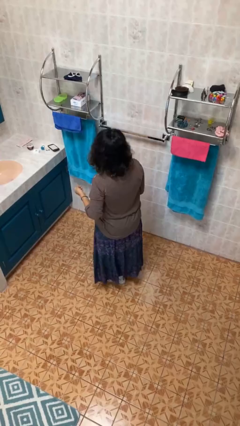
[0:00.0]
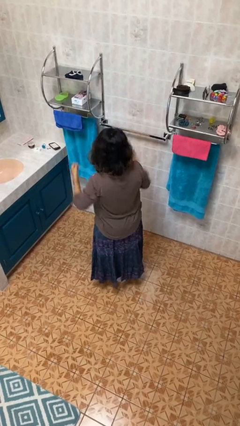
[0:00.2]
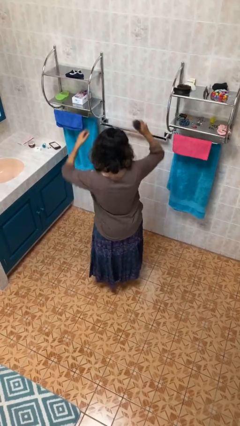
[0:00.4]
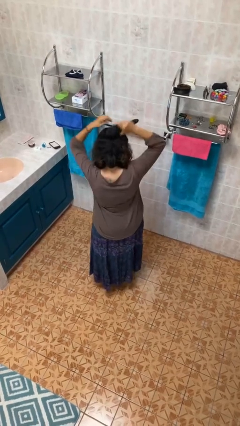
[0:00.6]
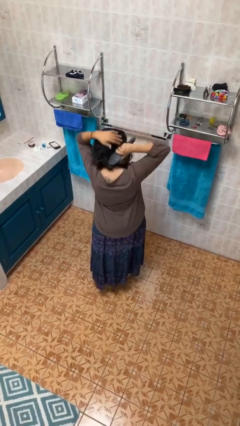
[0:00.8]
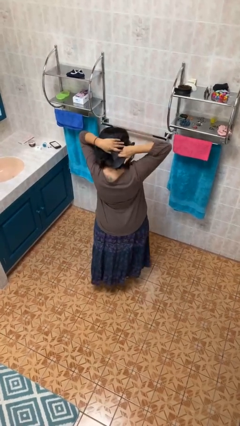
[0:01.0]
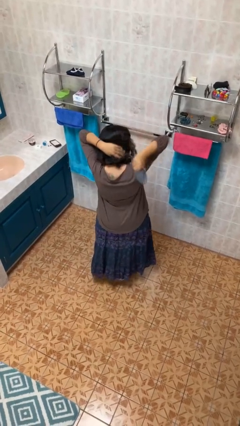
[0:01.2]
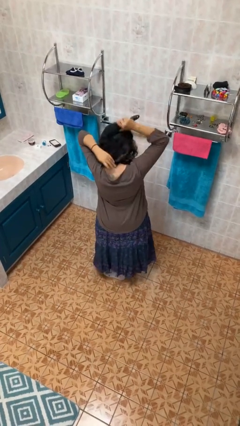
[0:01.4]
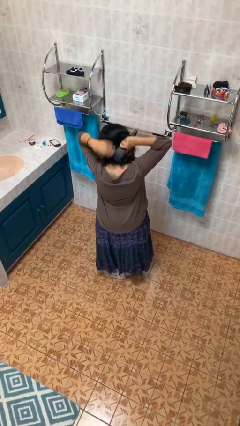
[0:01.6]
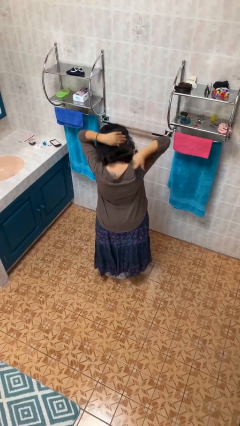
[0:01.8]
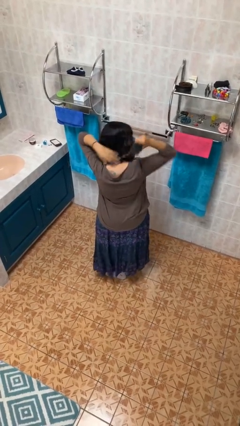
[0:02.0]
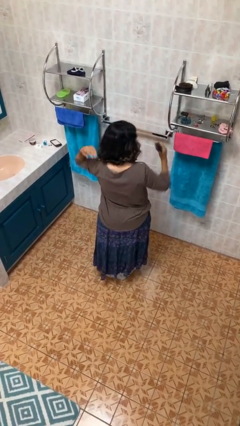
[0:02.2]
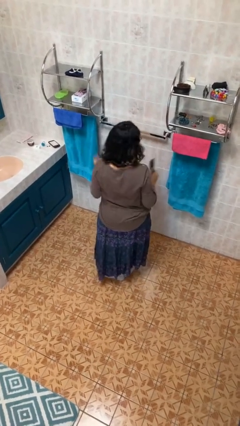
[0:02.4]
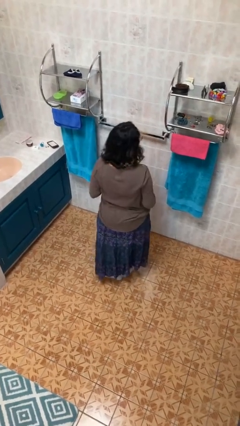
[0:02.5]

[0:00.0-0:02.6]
person brushes hair

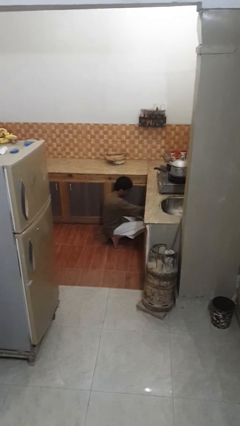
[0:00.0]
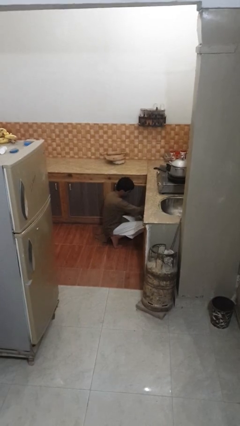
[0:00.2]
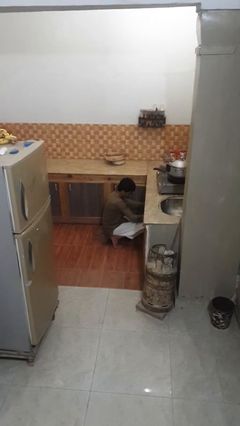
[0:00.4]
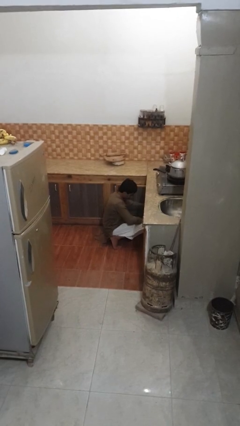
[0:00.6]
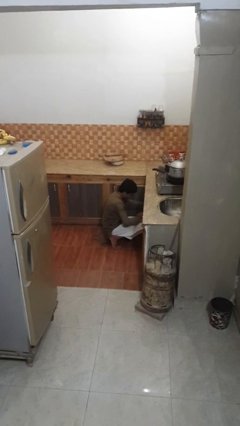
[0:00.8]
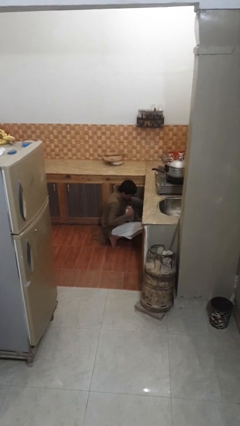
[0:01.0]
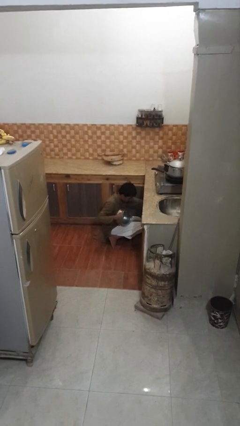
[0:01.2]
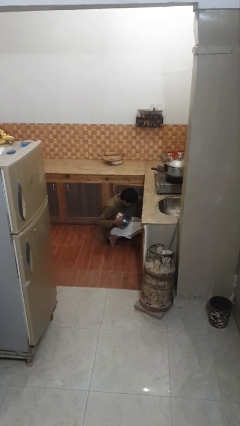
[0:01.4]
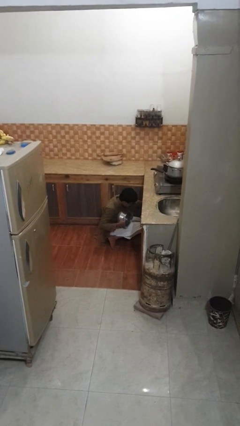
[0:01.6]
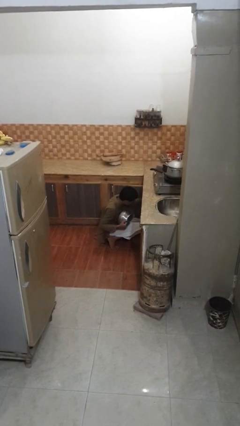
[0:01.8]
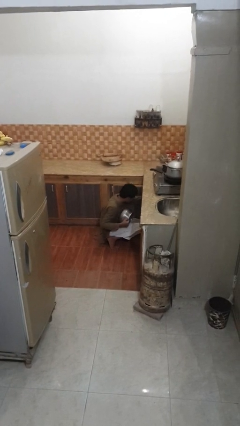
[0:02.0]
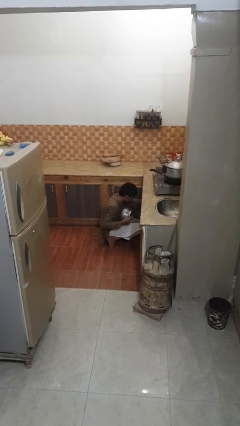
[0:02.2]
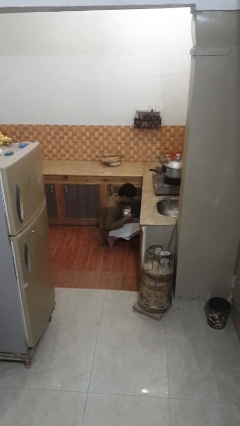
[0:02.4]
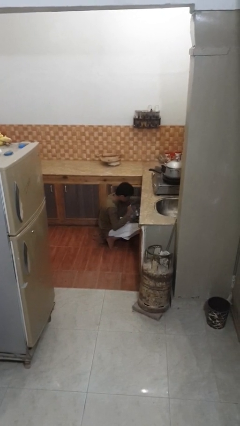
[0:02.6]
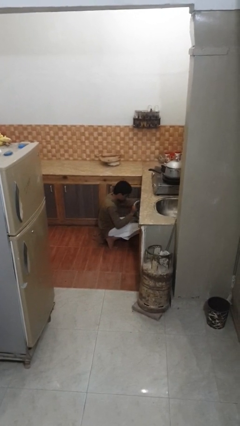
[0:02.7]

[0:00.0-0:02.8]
person searches in kitchen drawer

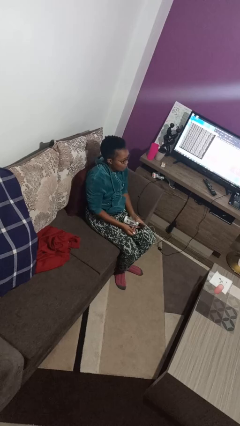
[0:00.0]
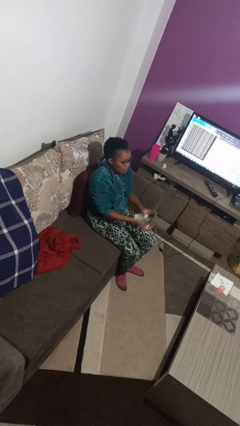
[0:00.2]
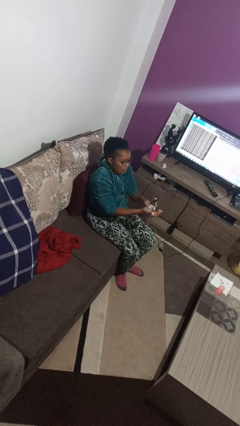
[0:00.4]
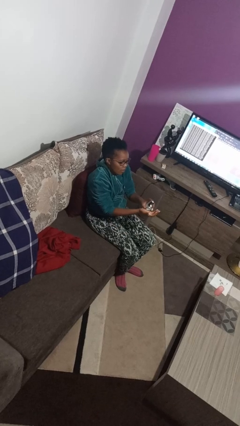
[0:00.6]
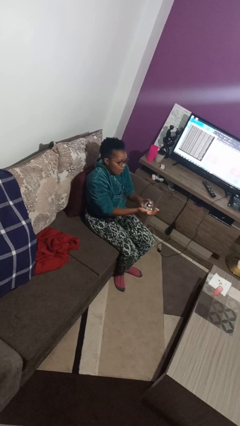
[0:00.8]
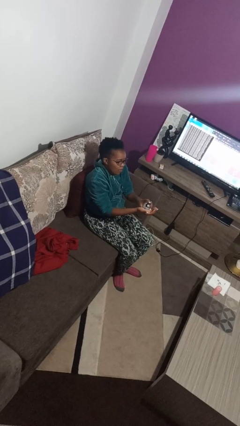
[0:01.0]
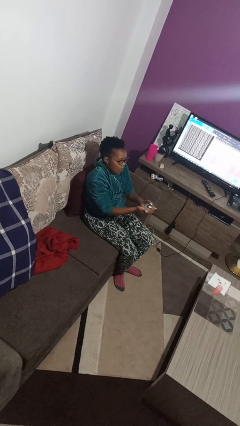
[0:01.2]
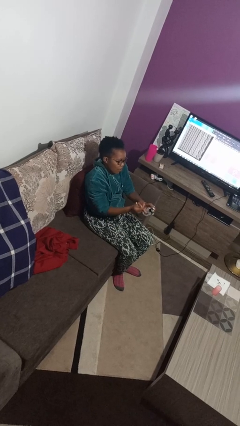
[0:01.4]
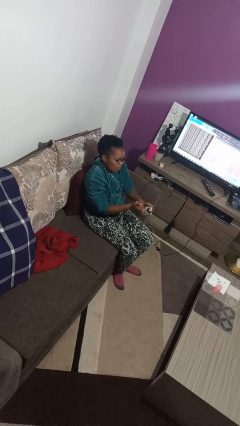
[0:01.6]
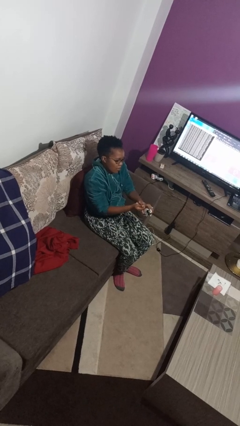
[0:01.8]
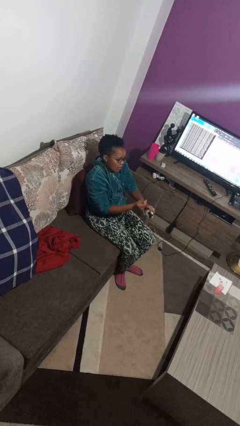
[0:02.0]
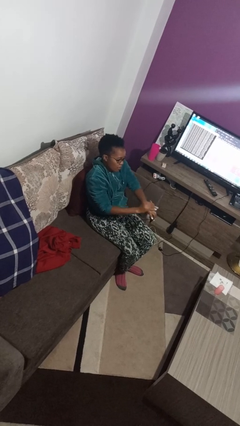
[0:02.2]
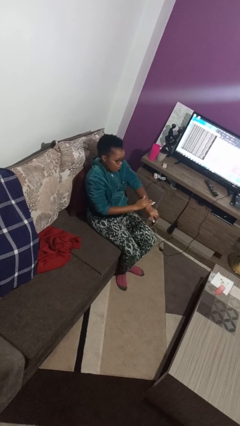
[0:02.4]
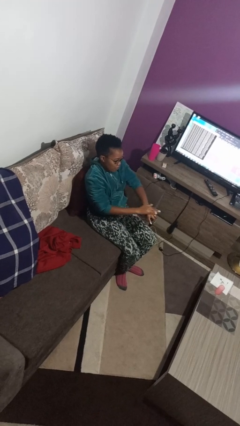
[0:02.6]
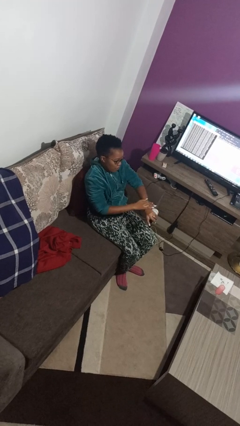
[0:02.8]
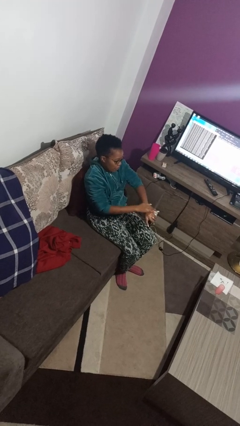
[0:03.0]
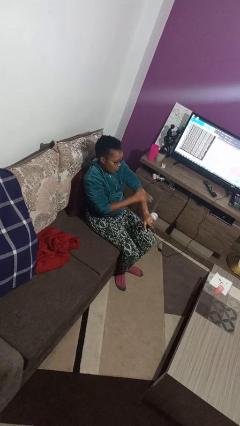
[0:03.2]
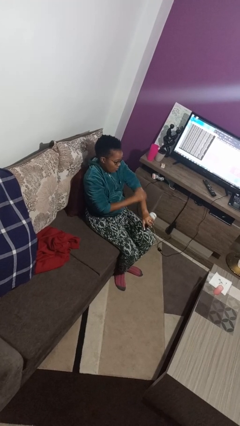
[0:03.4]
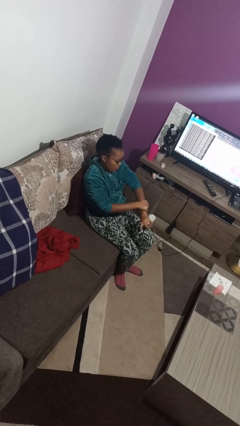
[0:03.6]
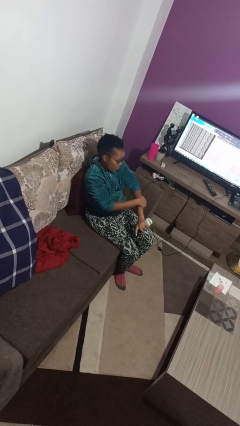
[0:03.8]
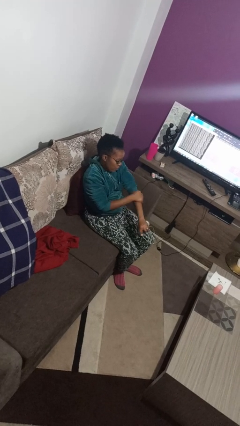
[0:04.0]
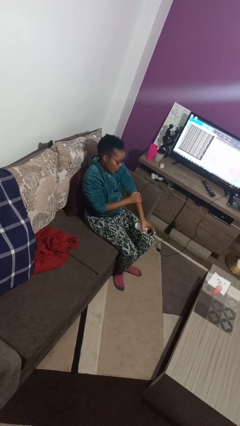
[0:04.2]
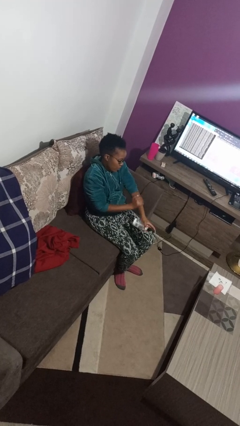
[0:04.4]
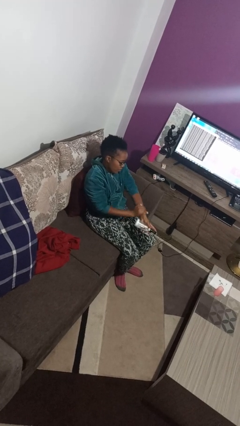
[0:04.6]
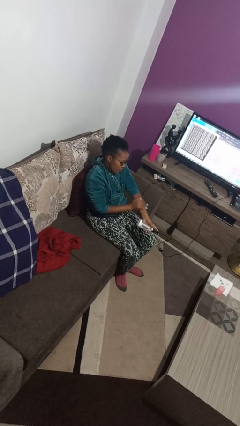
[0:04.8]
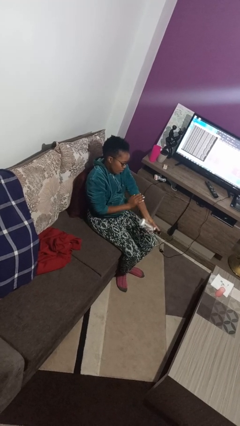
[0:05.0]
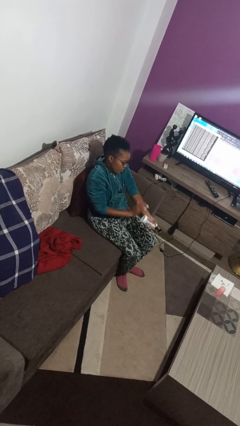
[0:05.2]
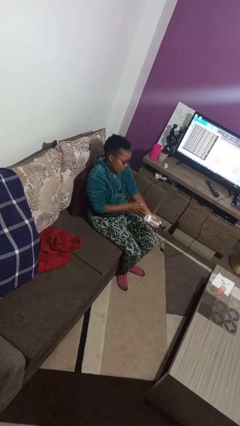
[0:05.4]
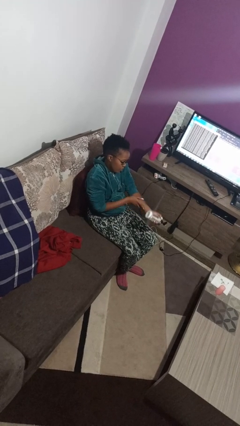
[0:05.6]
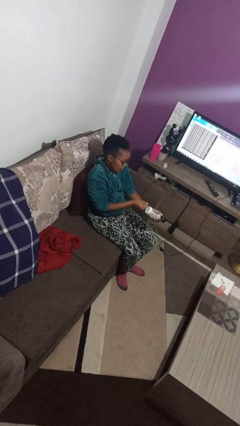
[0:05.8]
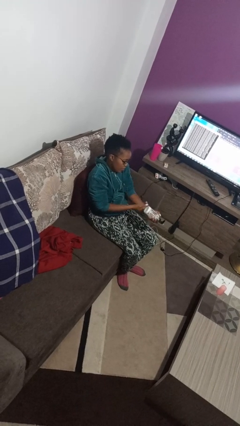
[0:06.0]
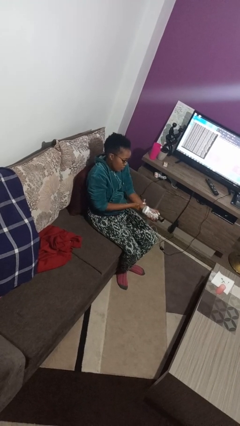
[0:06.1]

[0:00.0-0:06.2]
person applies sunscreen

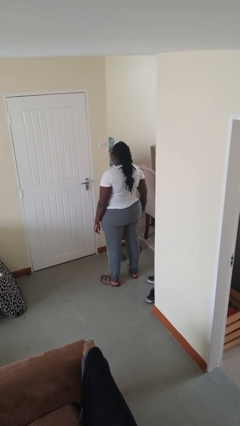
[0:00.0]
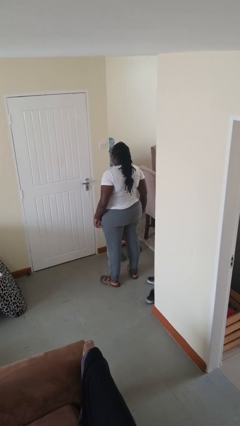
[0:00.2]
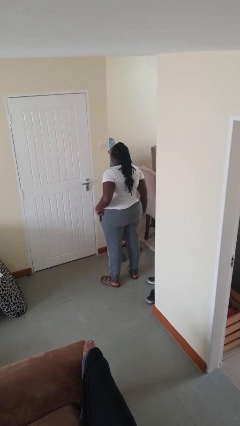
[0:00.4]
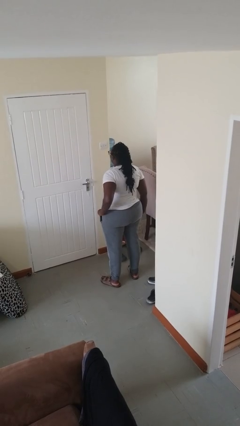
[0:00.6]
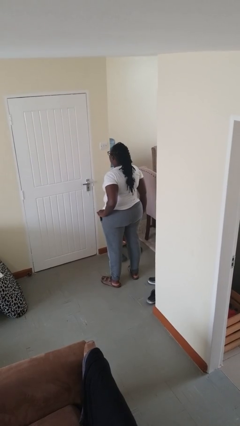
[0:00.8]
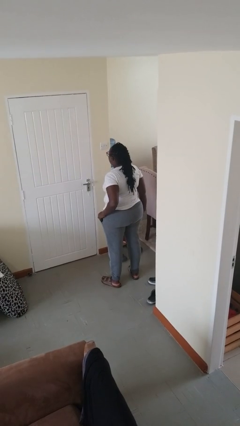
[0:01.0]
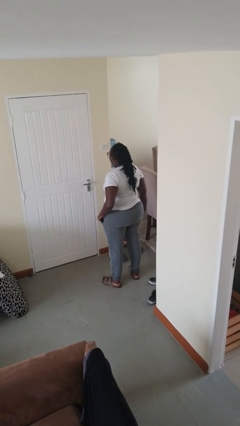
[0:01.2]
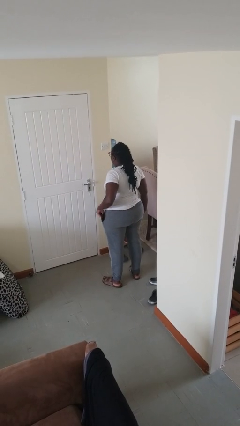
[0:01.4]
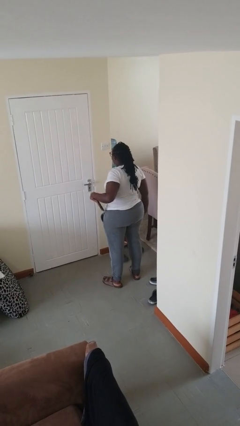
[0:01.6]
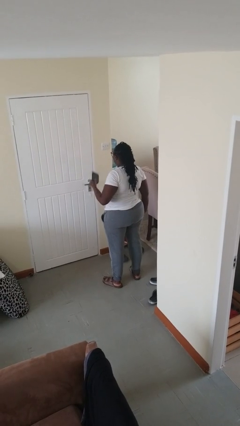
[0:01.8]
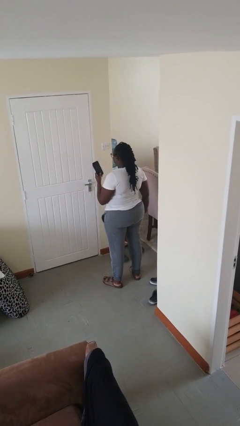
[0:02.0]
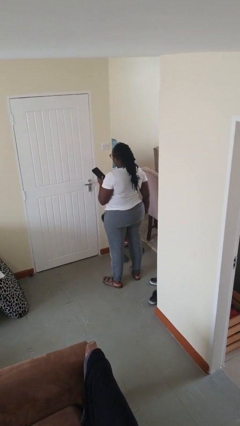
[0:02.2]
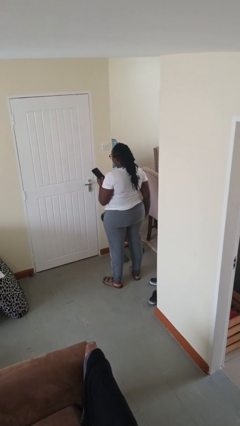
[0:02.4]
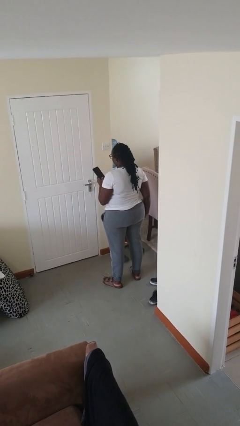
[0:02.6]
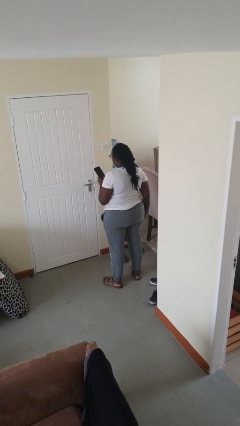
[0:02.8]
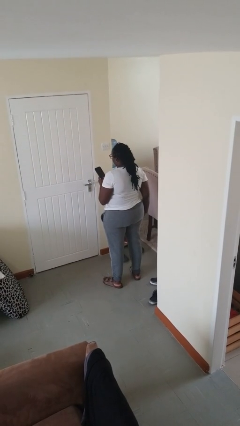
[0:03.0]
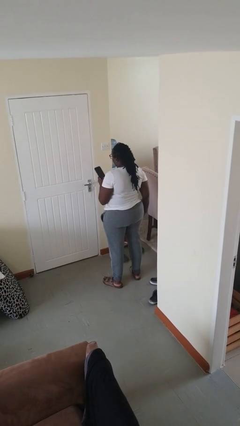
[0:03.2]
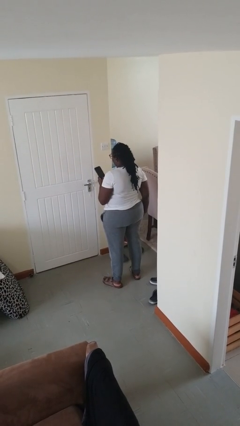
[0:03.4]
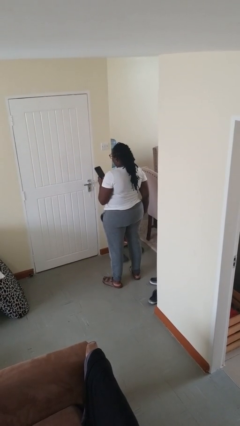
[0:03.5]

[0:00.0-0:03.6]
person takes phone from pocket

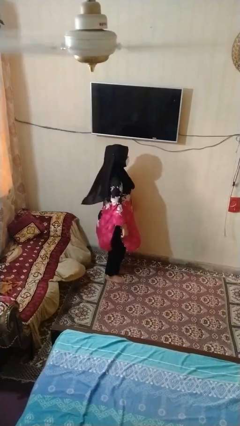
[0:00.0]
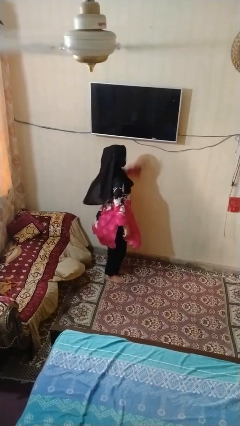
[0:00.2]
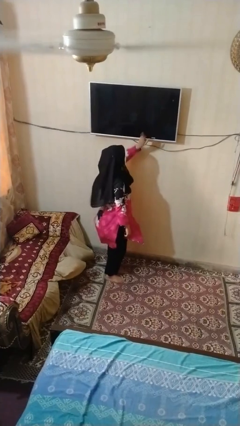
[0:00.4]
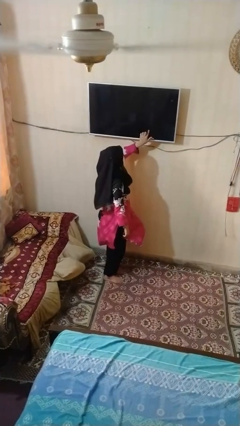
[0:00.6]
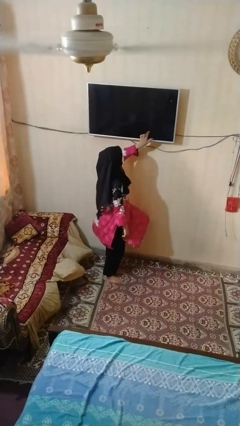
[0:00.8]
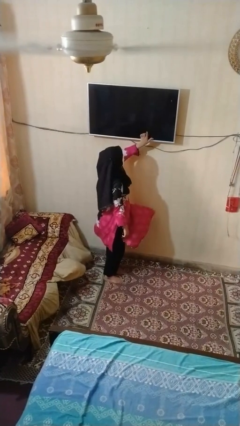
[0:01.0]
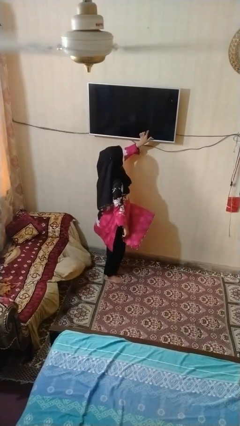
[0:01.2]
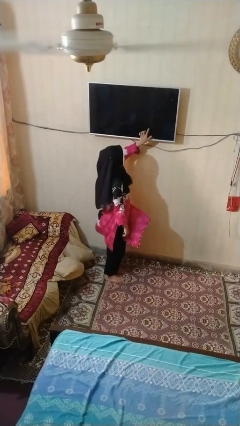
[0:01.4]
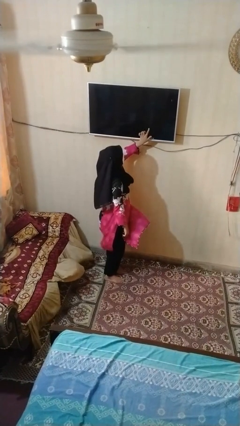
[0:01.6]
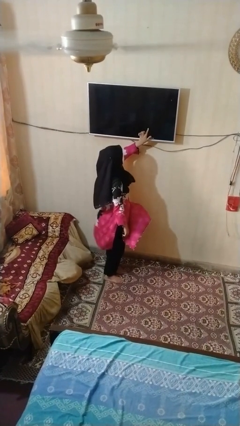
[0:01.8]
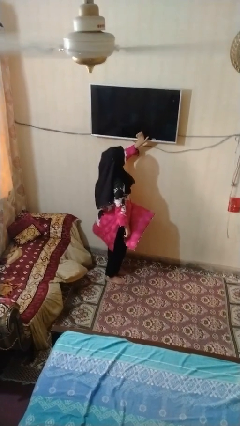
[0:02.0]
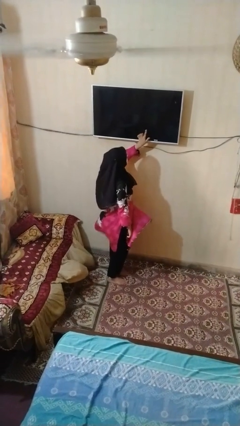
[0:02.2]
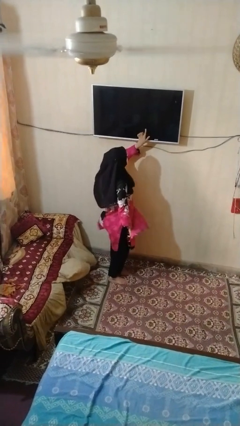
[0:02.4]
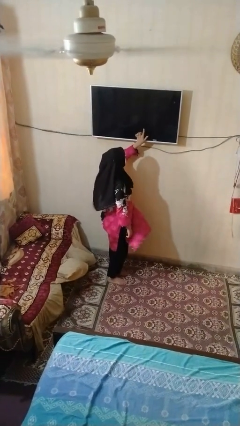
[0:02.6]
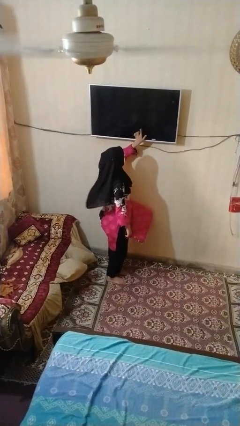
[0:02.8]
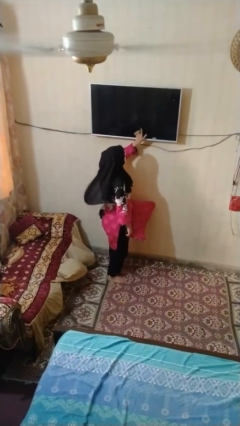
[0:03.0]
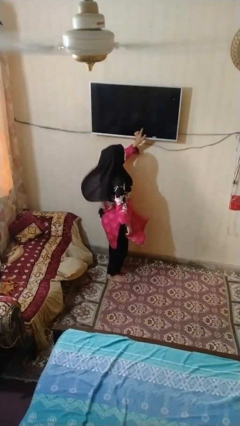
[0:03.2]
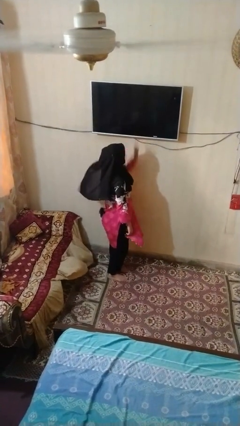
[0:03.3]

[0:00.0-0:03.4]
person taps object with finger
